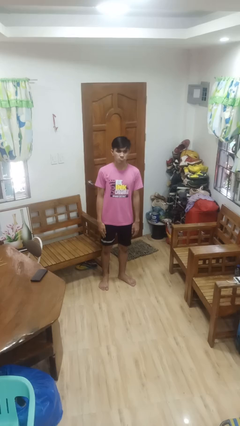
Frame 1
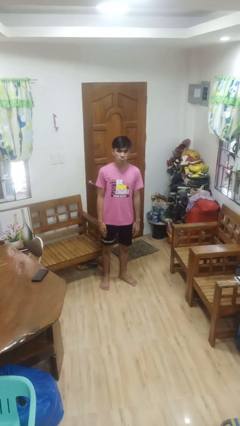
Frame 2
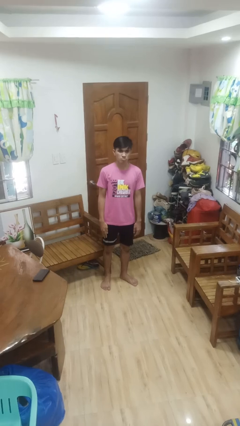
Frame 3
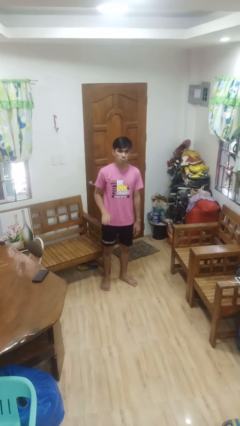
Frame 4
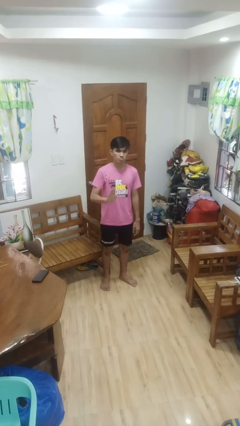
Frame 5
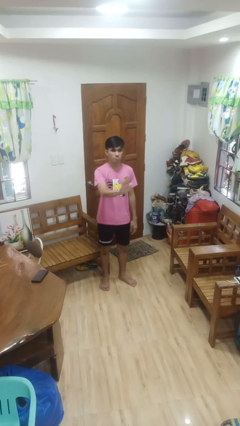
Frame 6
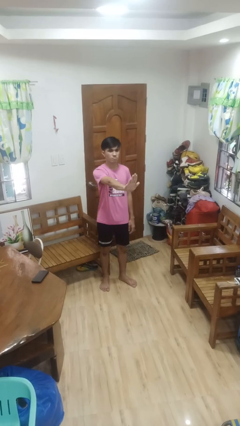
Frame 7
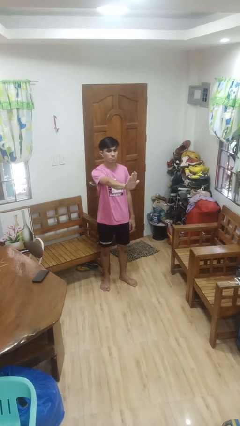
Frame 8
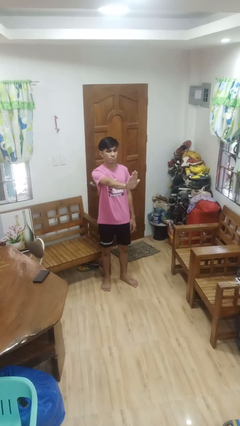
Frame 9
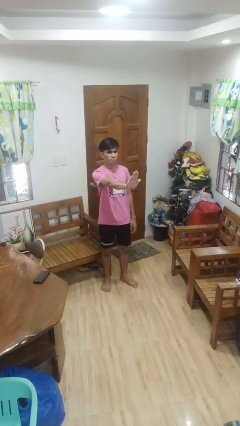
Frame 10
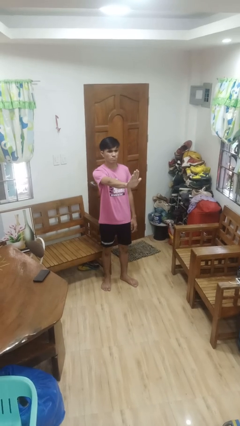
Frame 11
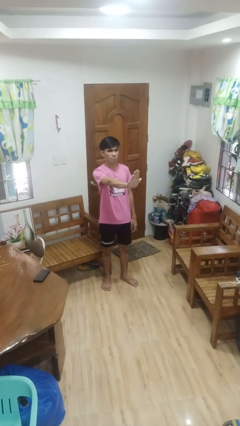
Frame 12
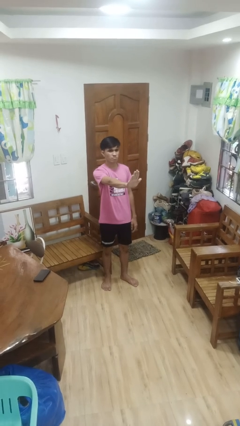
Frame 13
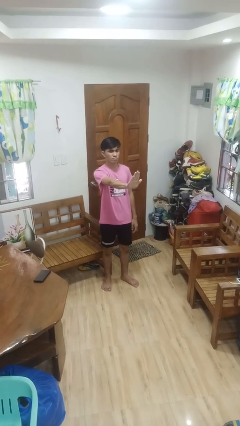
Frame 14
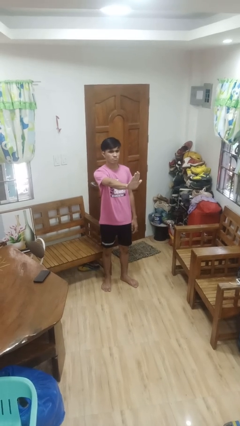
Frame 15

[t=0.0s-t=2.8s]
person gestures stop

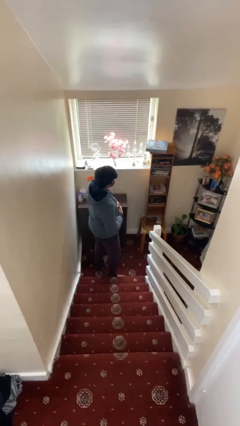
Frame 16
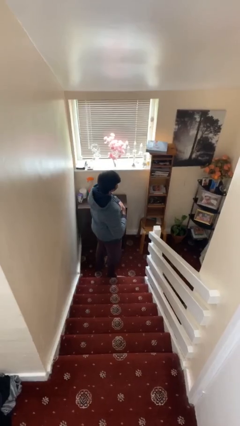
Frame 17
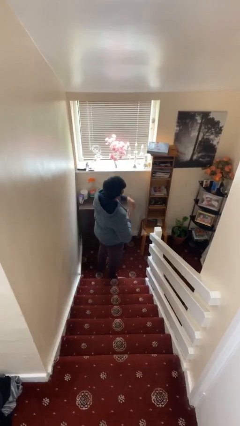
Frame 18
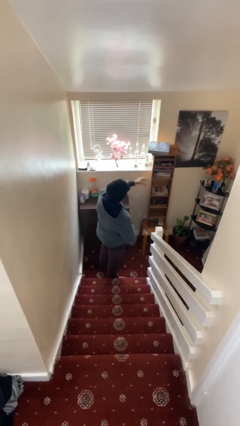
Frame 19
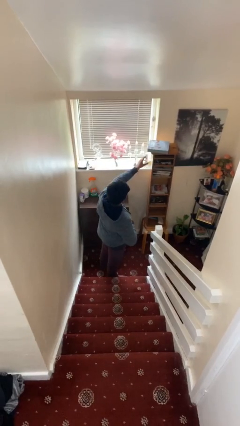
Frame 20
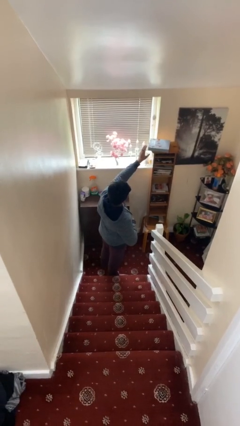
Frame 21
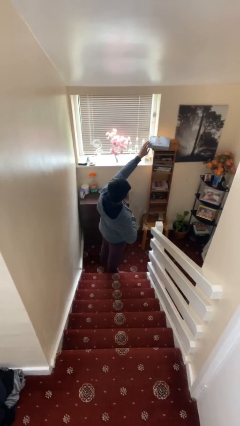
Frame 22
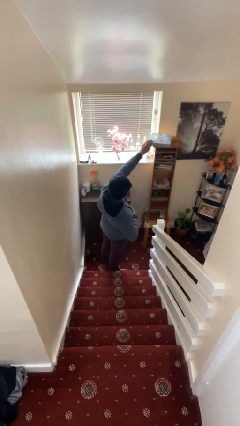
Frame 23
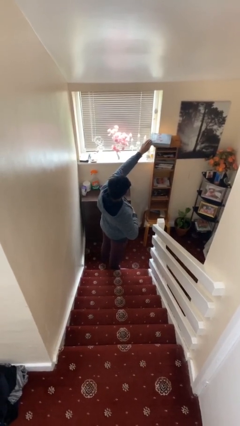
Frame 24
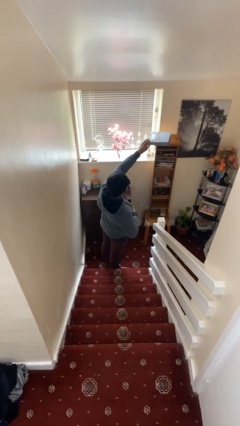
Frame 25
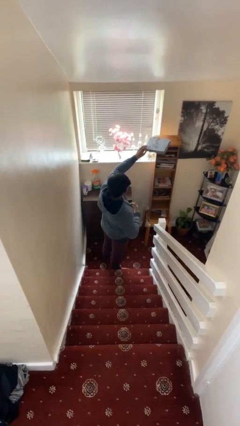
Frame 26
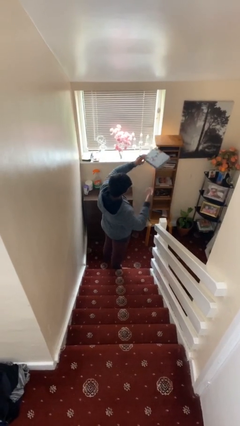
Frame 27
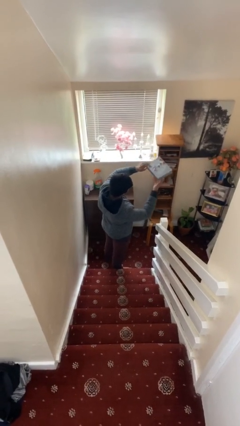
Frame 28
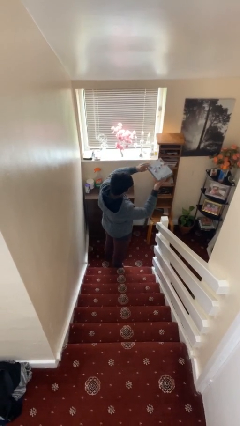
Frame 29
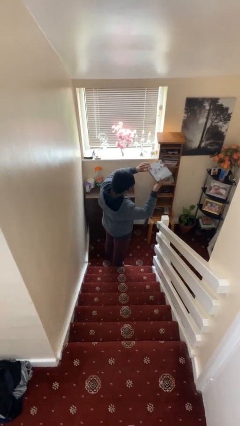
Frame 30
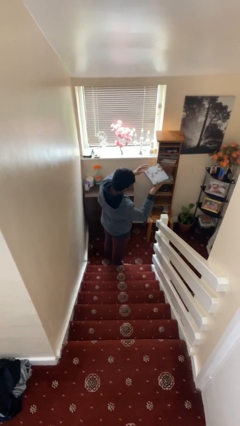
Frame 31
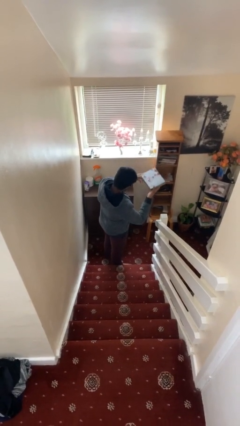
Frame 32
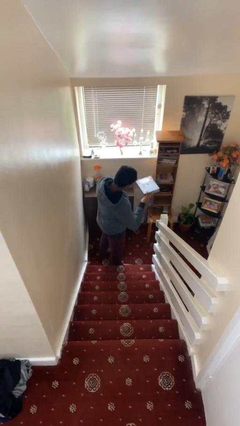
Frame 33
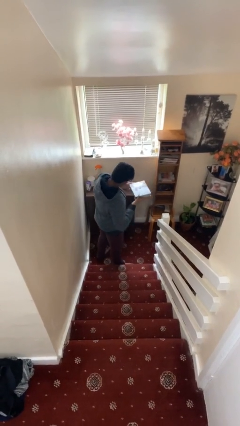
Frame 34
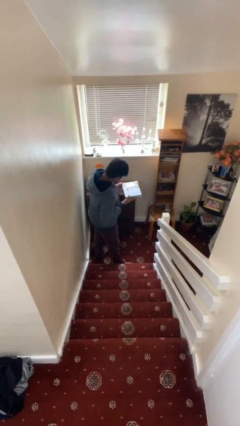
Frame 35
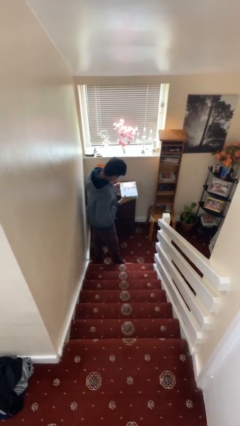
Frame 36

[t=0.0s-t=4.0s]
person picks up object from shelf

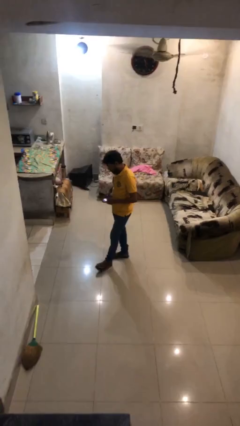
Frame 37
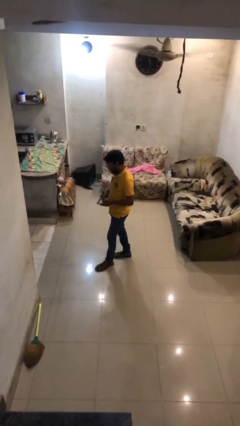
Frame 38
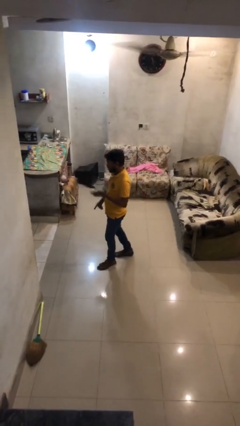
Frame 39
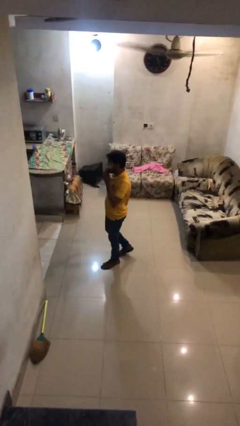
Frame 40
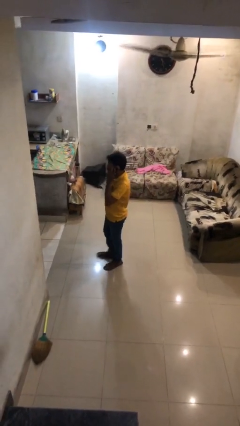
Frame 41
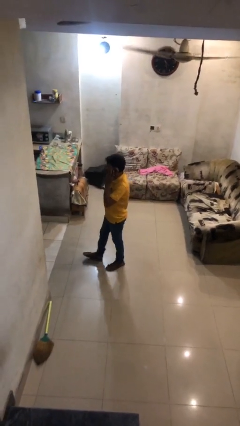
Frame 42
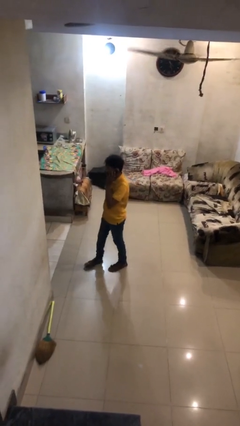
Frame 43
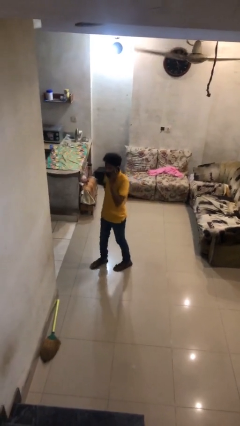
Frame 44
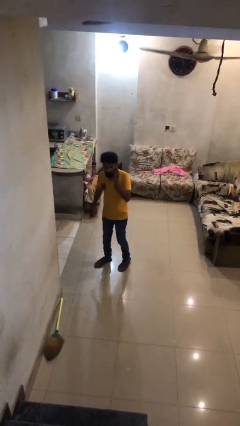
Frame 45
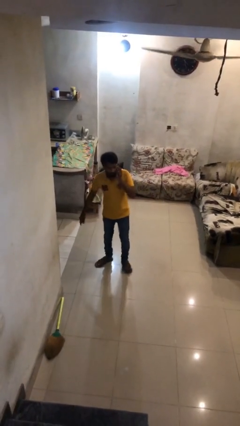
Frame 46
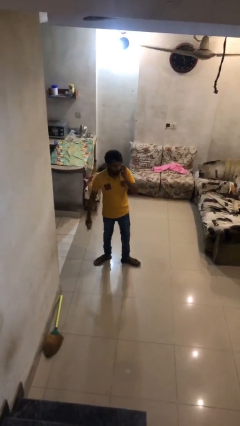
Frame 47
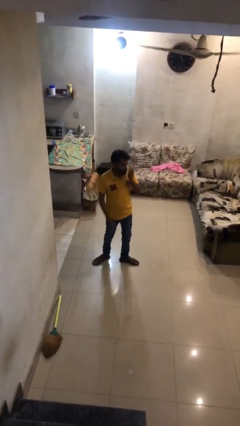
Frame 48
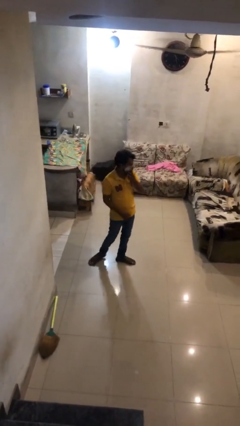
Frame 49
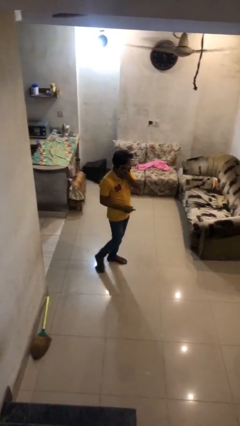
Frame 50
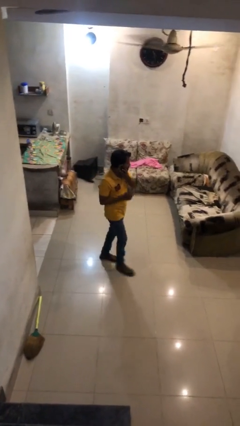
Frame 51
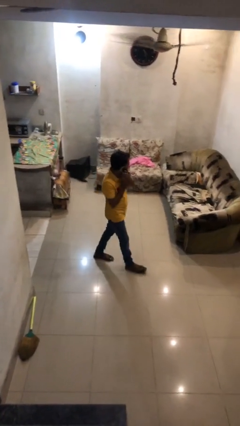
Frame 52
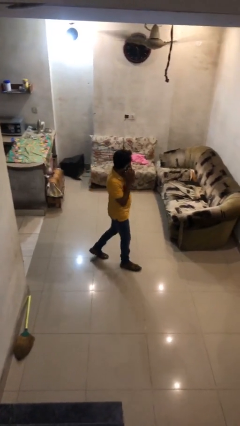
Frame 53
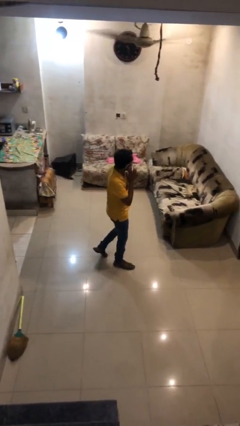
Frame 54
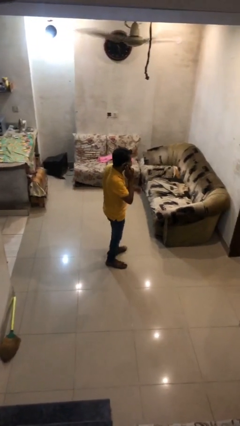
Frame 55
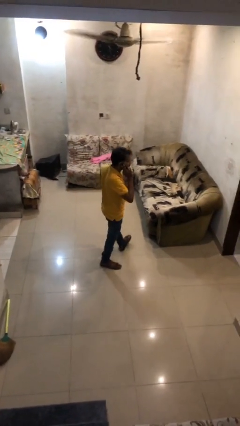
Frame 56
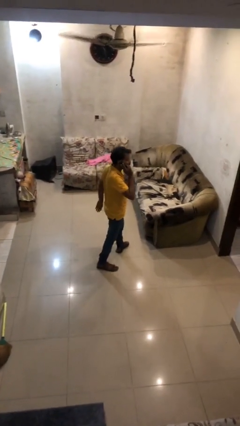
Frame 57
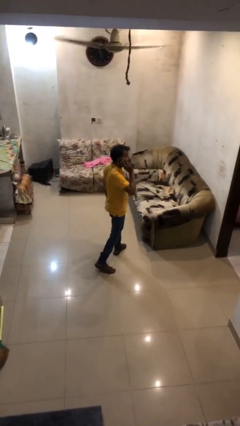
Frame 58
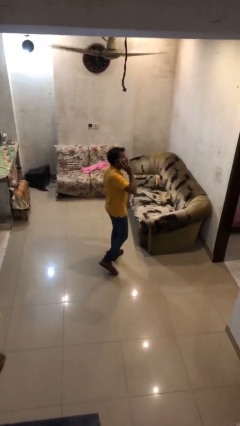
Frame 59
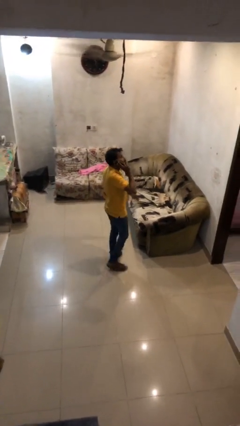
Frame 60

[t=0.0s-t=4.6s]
person talks on phone

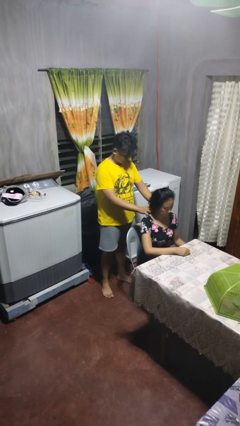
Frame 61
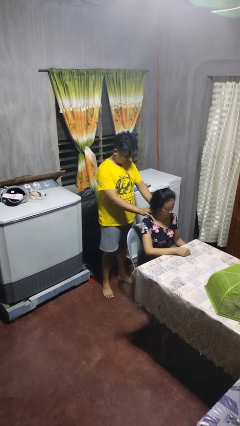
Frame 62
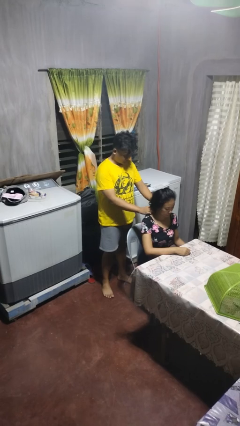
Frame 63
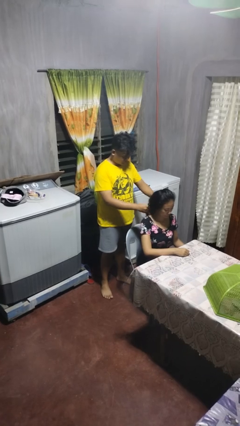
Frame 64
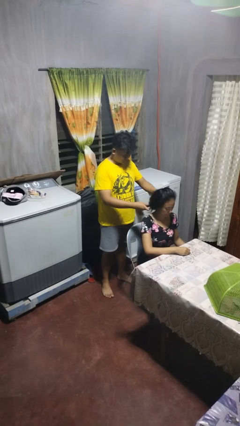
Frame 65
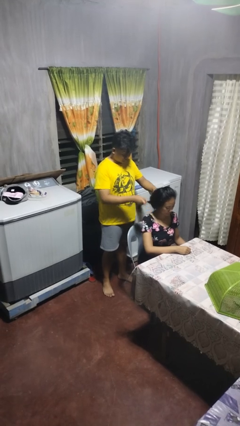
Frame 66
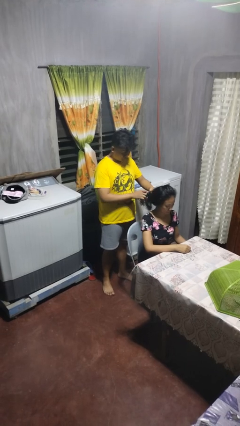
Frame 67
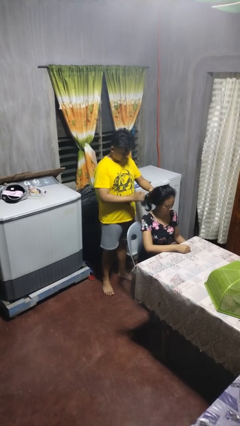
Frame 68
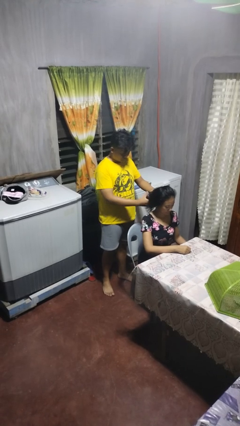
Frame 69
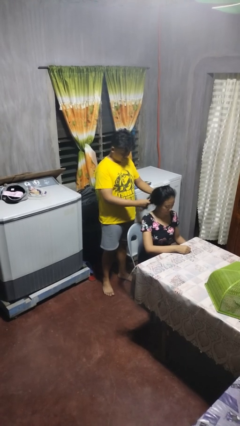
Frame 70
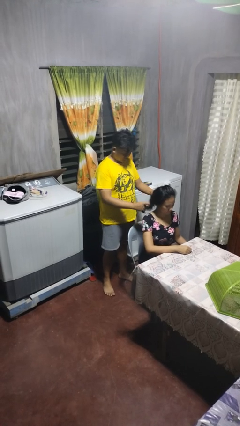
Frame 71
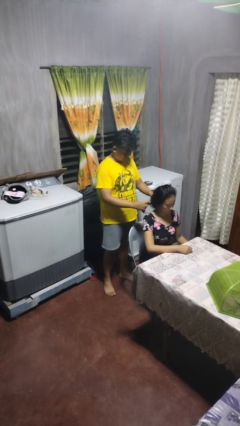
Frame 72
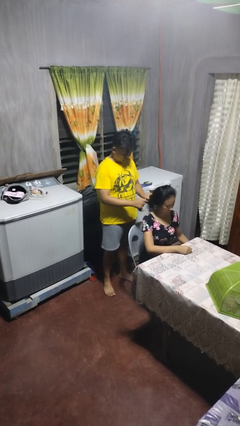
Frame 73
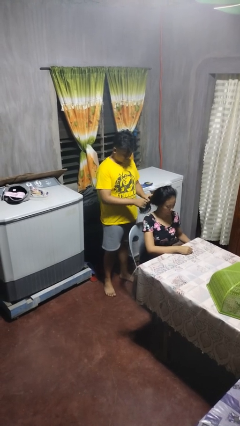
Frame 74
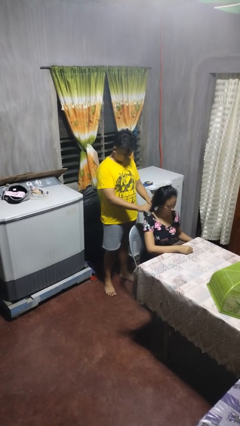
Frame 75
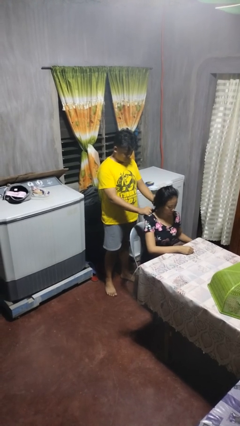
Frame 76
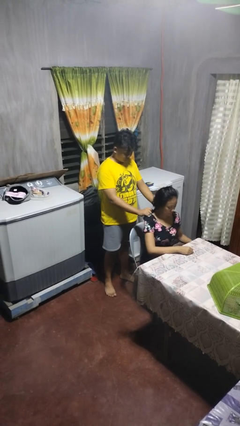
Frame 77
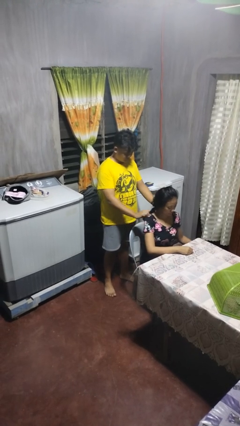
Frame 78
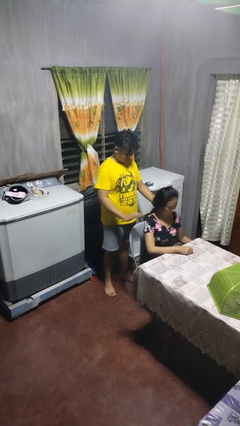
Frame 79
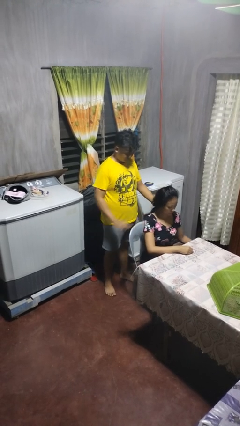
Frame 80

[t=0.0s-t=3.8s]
person braids hair of person

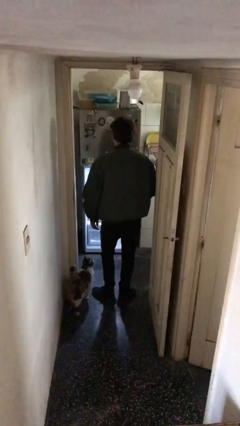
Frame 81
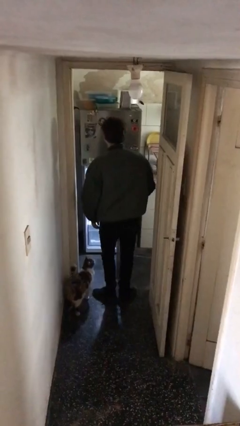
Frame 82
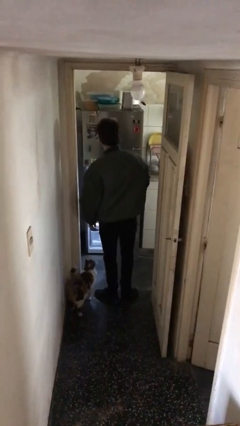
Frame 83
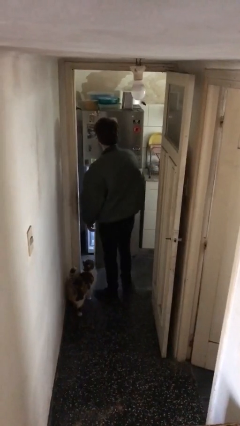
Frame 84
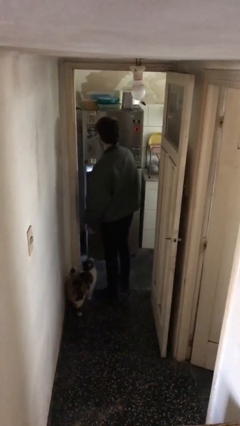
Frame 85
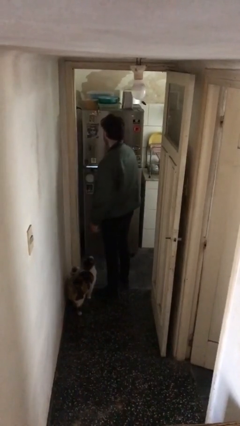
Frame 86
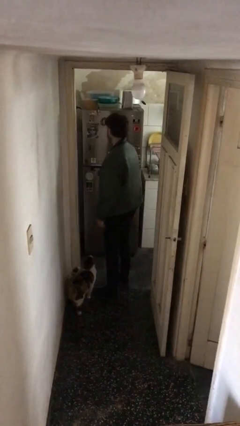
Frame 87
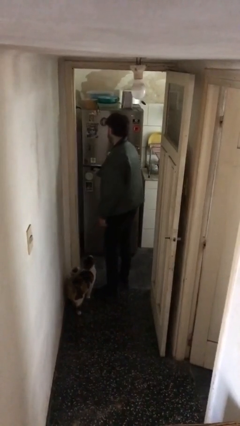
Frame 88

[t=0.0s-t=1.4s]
person closes refrigerator

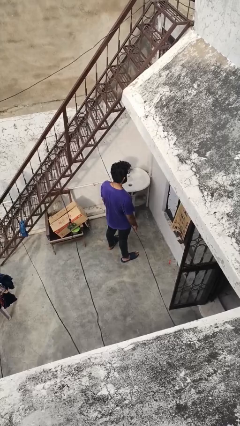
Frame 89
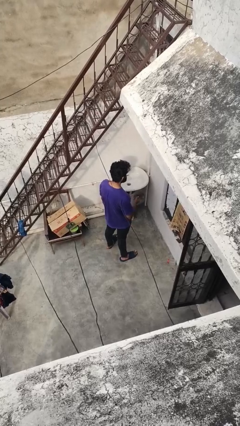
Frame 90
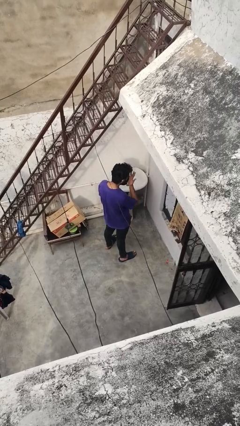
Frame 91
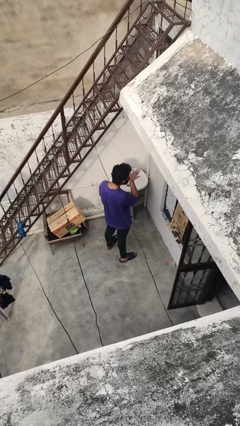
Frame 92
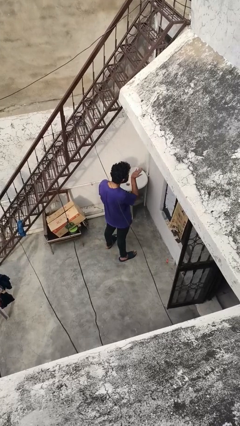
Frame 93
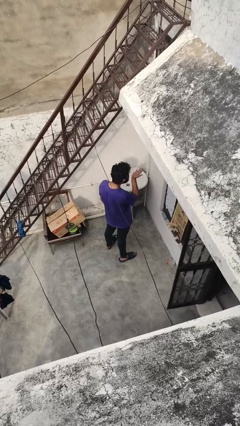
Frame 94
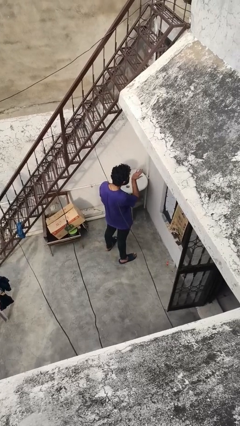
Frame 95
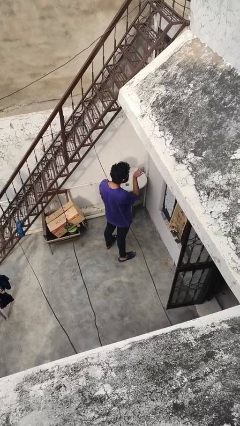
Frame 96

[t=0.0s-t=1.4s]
person gestures blow kiss
